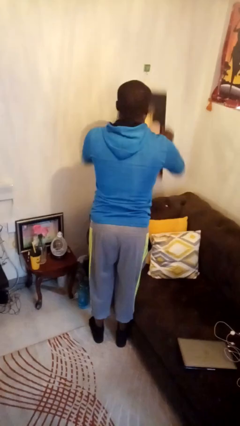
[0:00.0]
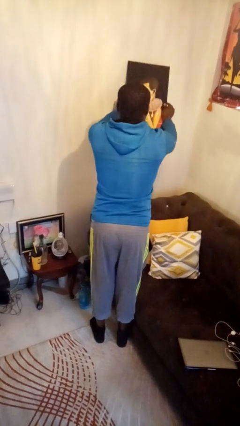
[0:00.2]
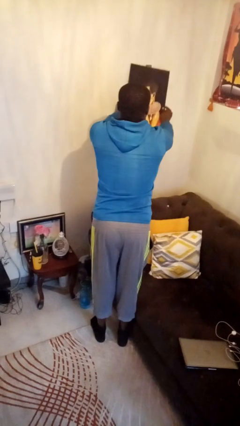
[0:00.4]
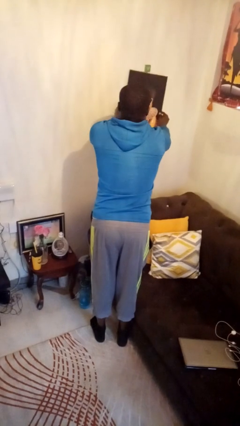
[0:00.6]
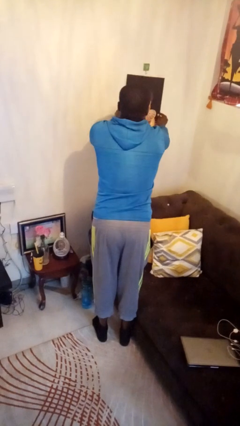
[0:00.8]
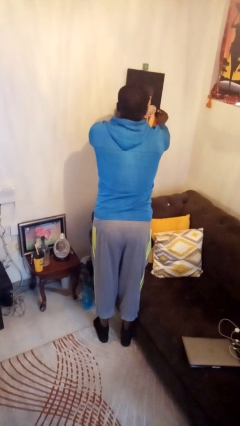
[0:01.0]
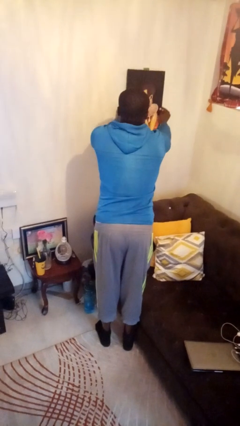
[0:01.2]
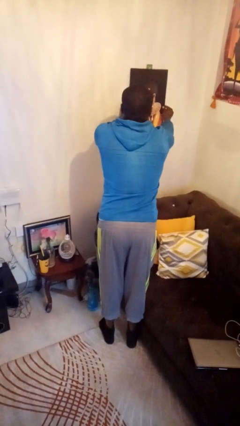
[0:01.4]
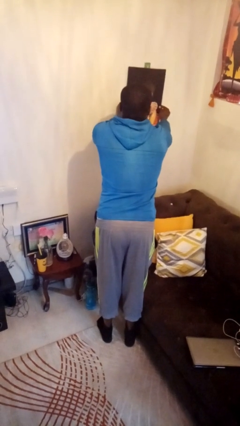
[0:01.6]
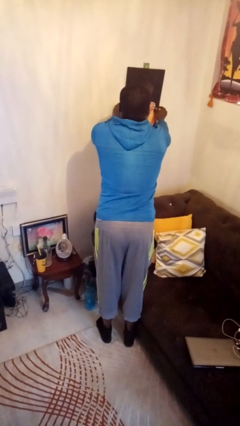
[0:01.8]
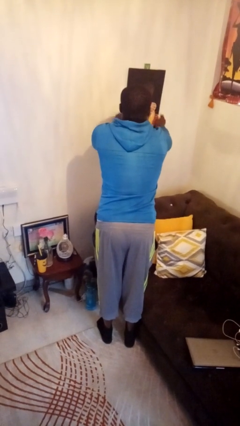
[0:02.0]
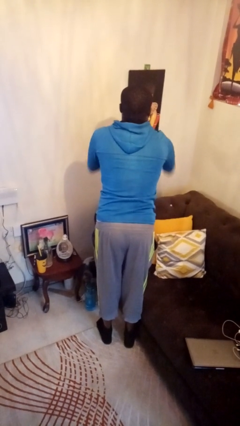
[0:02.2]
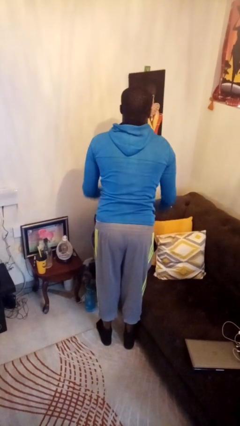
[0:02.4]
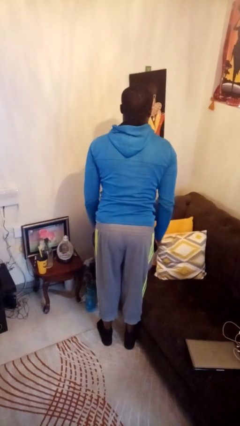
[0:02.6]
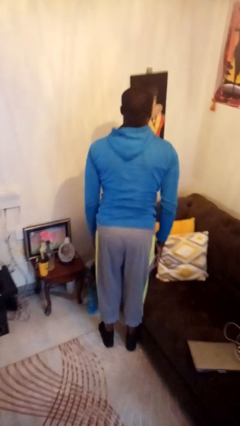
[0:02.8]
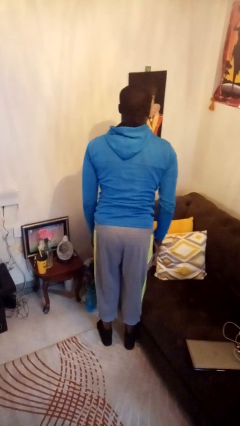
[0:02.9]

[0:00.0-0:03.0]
person puts up picture frame

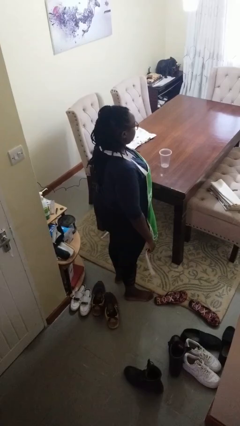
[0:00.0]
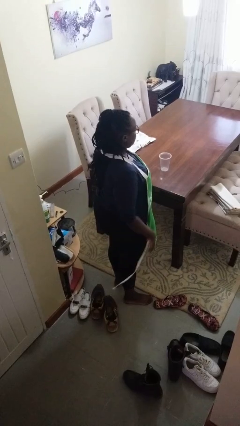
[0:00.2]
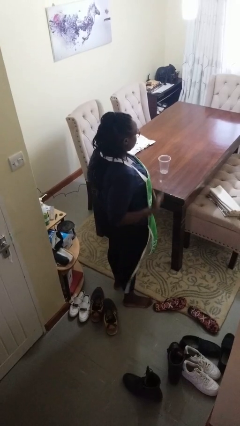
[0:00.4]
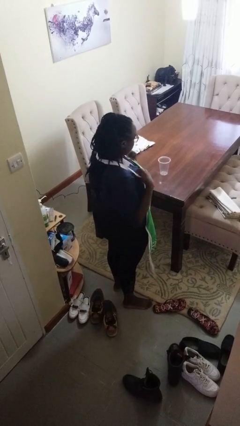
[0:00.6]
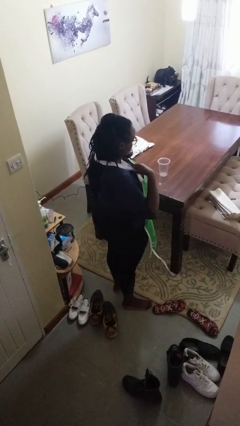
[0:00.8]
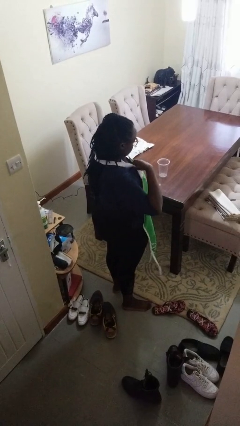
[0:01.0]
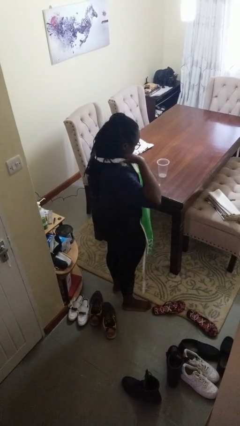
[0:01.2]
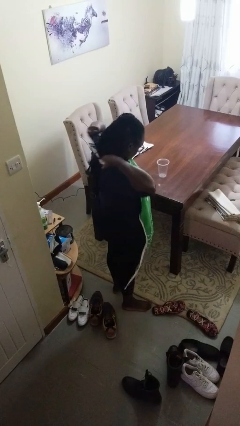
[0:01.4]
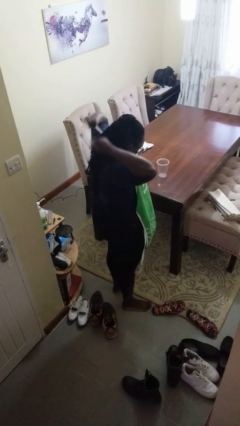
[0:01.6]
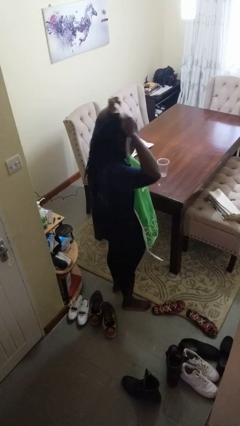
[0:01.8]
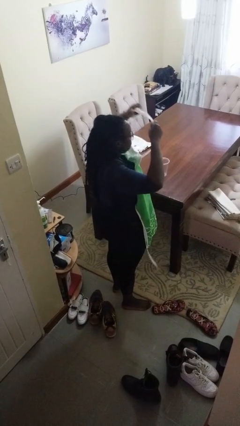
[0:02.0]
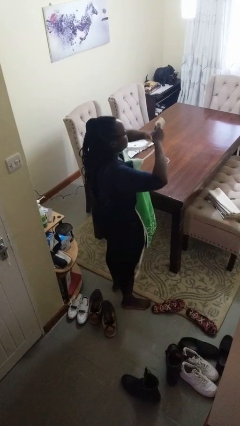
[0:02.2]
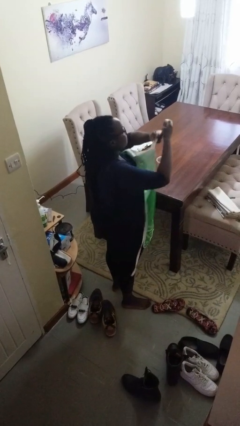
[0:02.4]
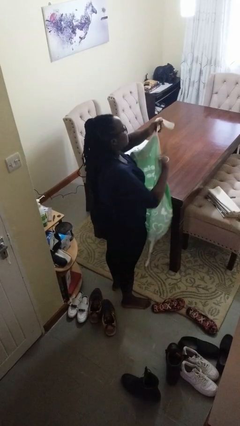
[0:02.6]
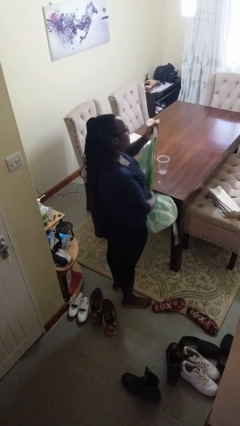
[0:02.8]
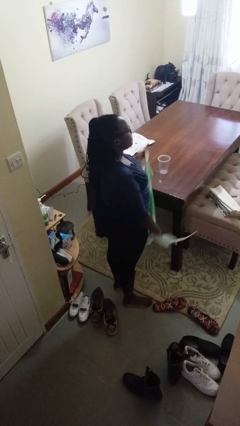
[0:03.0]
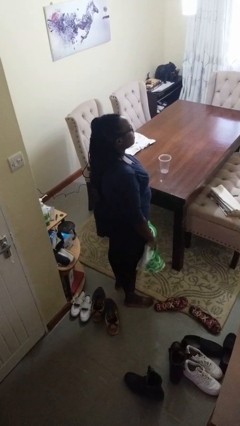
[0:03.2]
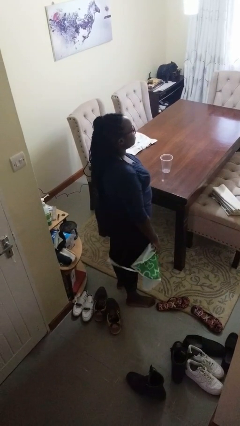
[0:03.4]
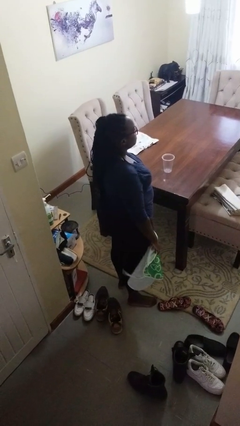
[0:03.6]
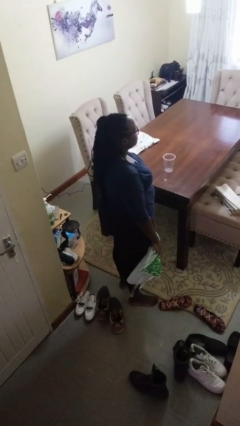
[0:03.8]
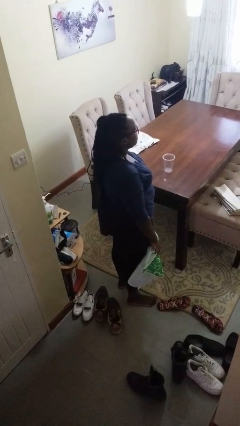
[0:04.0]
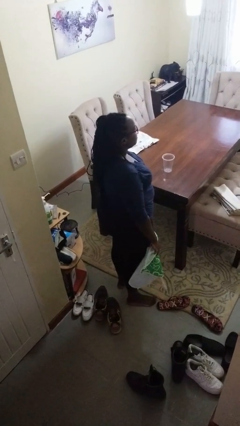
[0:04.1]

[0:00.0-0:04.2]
person takes off apron

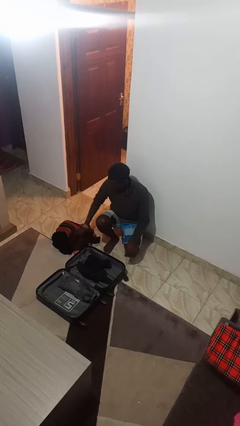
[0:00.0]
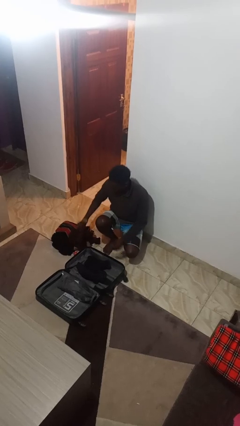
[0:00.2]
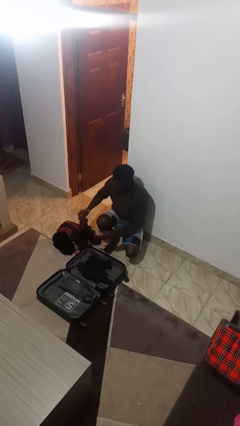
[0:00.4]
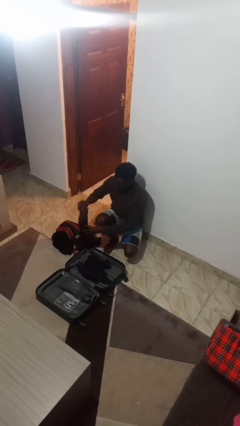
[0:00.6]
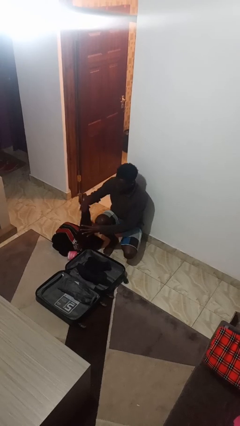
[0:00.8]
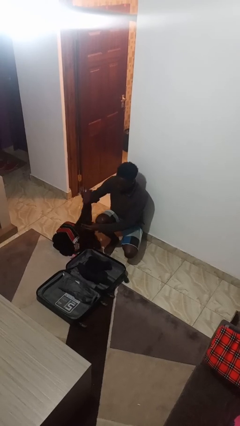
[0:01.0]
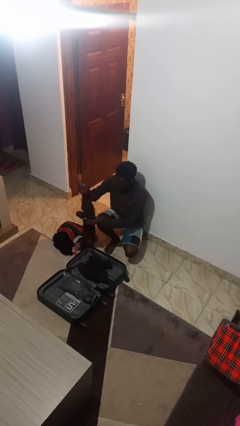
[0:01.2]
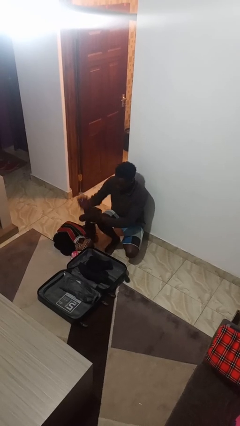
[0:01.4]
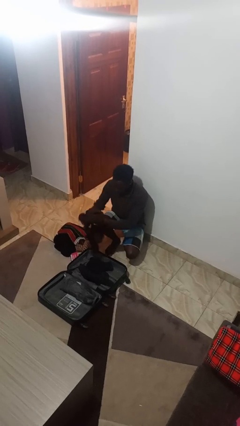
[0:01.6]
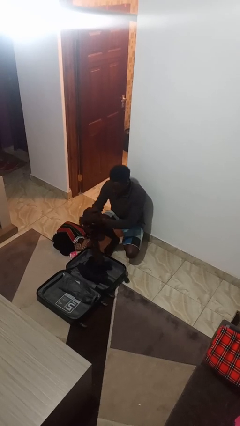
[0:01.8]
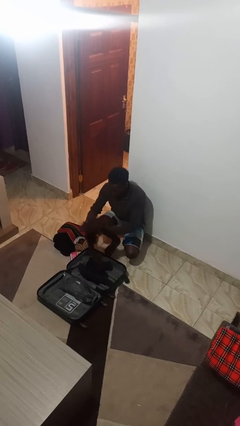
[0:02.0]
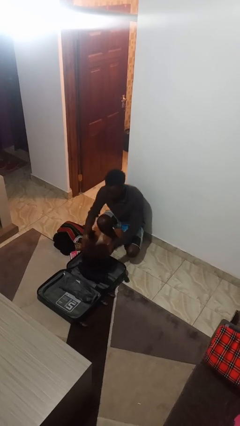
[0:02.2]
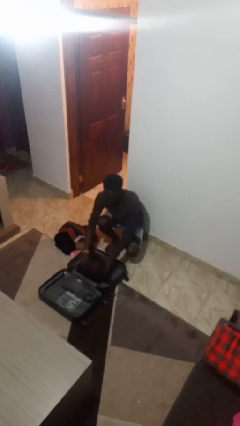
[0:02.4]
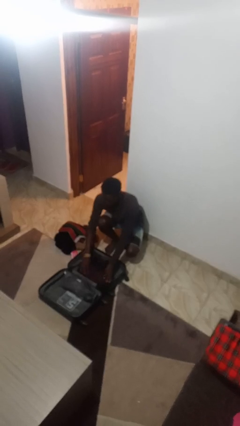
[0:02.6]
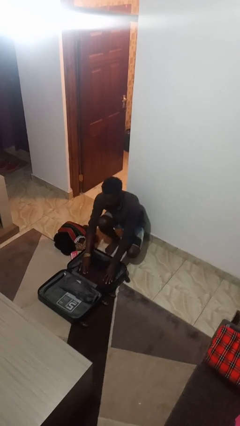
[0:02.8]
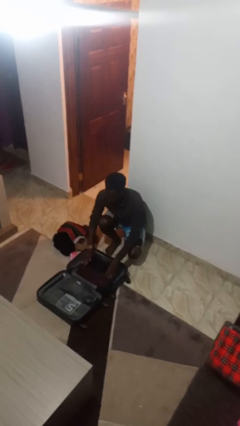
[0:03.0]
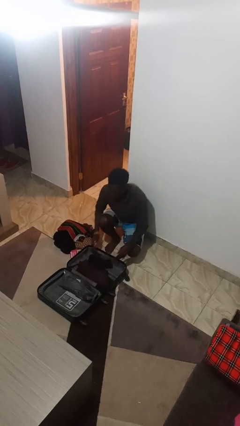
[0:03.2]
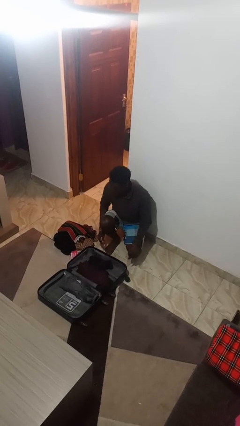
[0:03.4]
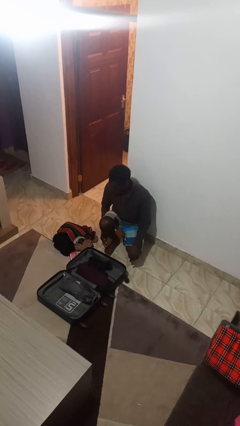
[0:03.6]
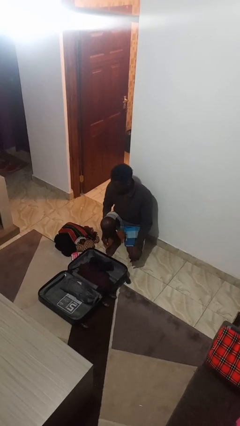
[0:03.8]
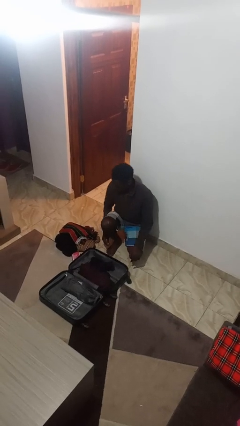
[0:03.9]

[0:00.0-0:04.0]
person loads clothes into suitcase

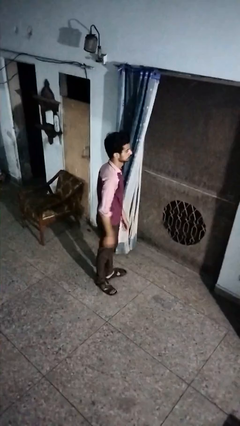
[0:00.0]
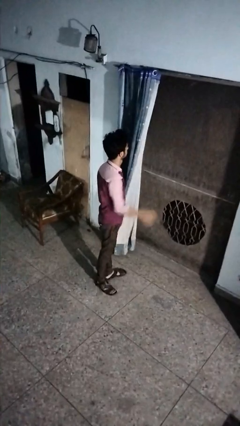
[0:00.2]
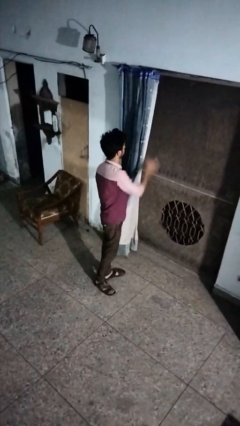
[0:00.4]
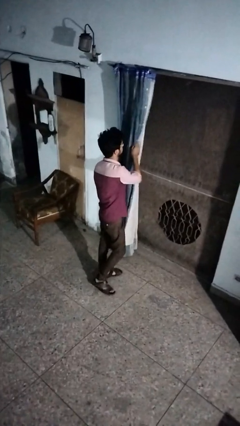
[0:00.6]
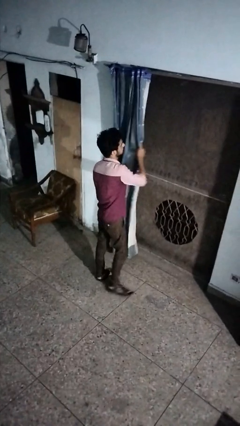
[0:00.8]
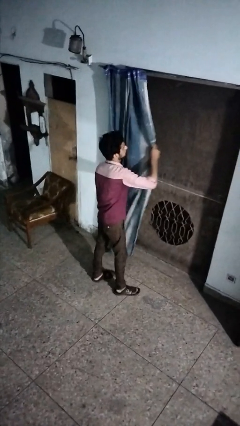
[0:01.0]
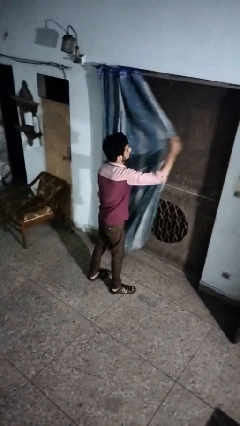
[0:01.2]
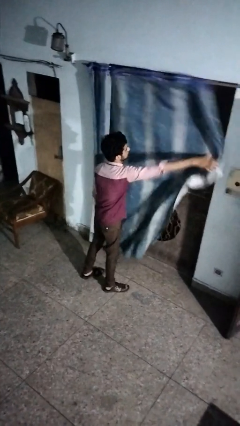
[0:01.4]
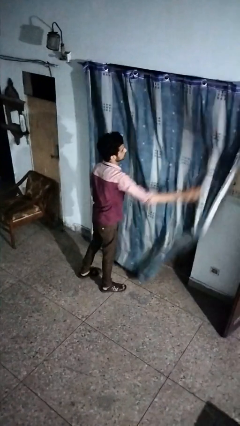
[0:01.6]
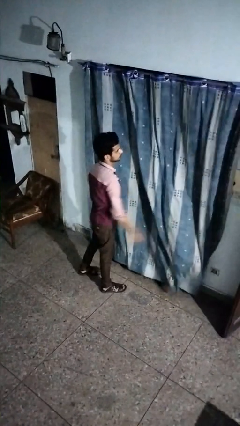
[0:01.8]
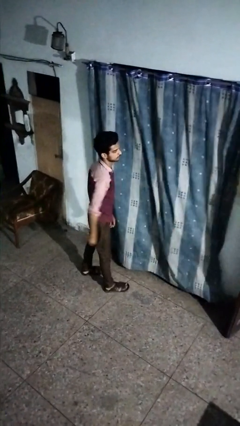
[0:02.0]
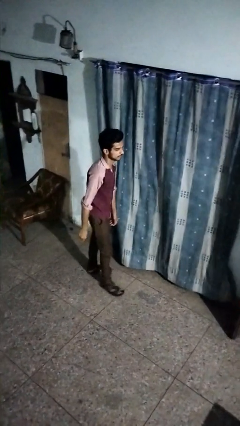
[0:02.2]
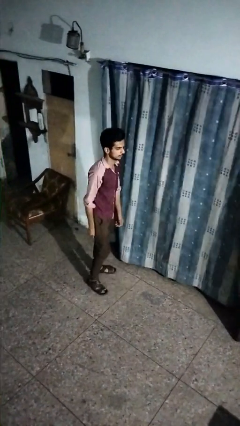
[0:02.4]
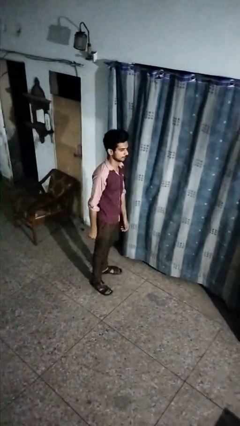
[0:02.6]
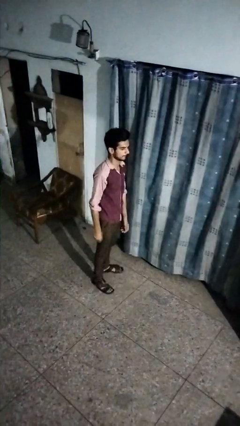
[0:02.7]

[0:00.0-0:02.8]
person closes curtains

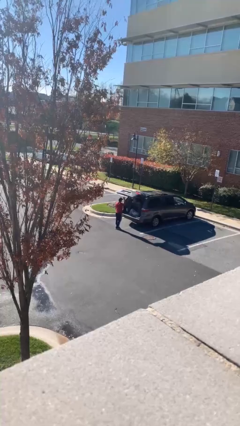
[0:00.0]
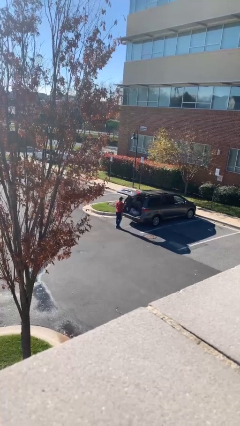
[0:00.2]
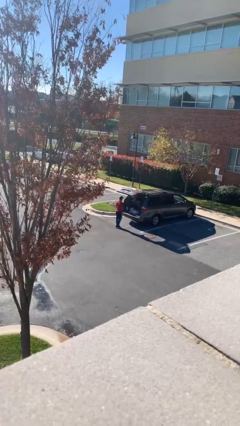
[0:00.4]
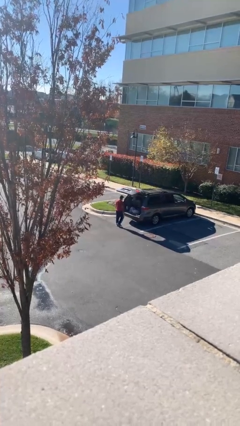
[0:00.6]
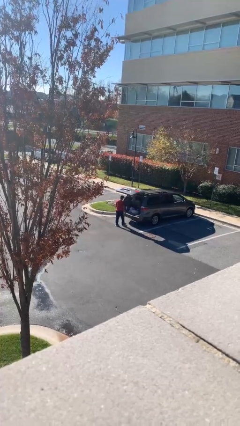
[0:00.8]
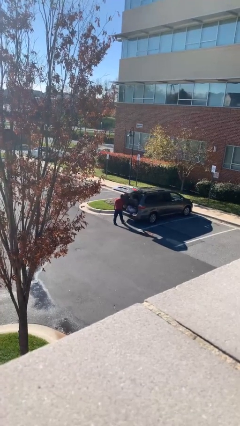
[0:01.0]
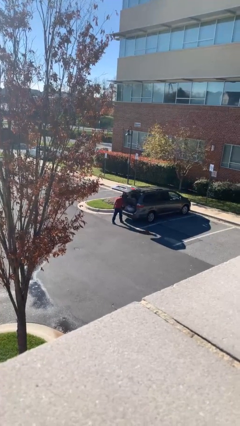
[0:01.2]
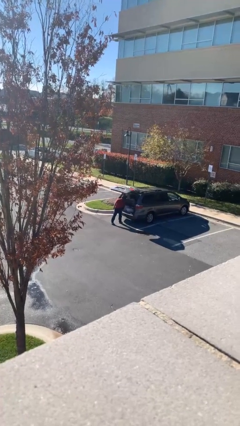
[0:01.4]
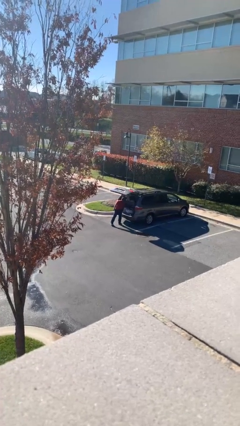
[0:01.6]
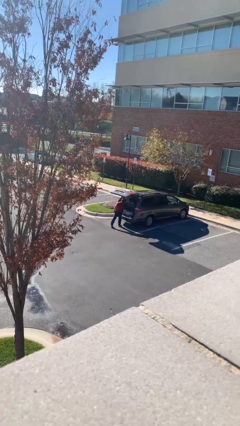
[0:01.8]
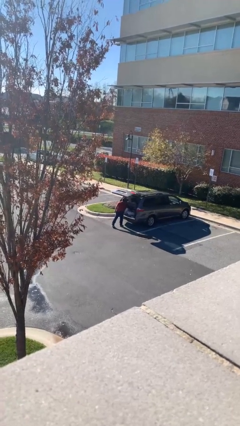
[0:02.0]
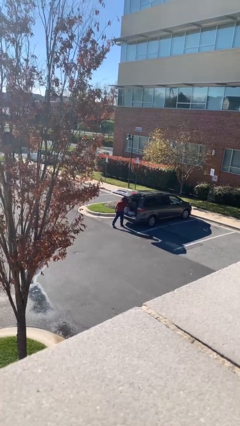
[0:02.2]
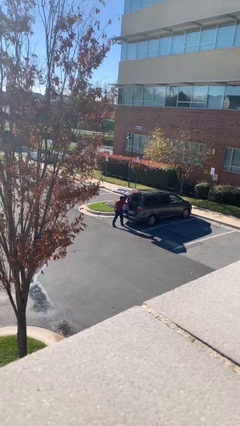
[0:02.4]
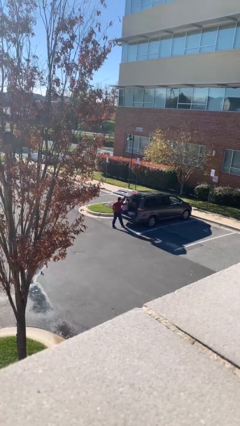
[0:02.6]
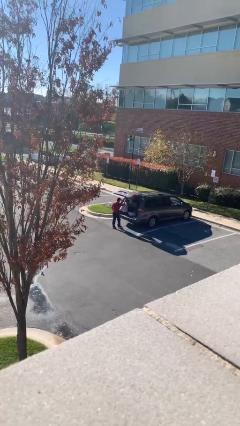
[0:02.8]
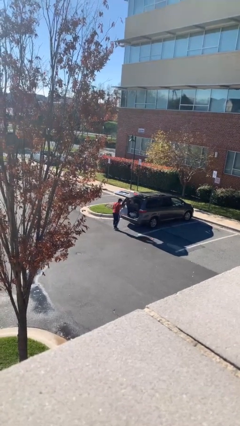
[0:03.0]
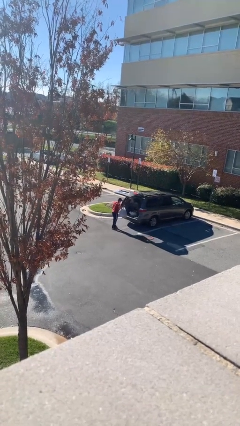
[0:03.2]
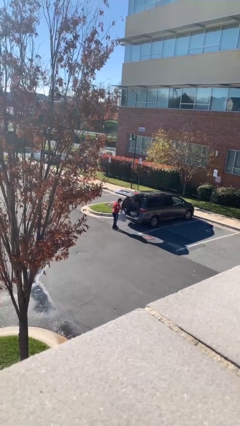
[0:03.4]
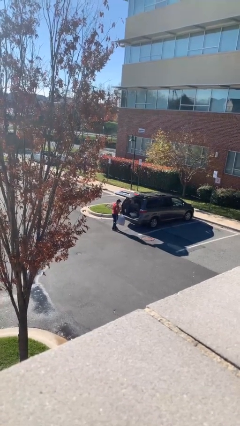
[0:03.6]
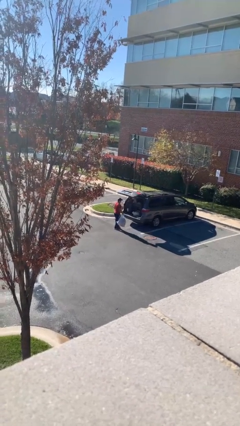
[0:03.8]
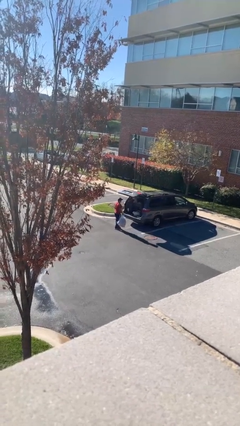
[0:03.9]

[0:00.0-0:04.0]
person unloads car
